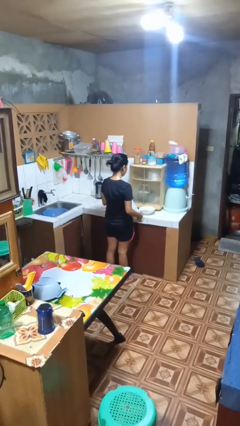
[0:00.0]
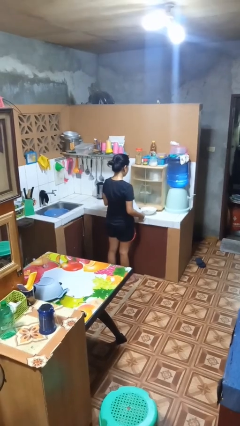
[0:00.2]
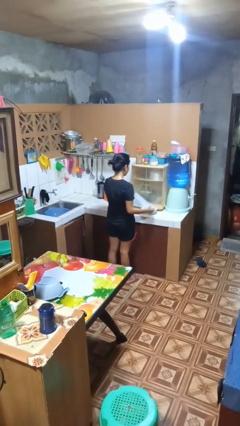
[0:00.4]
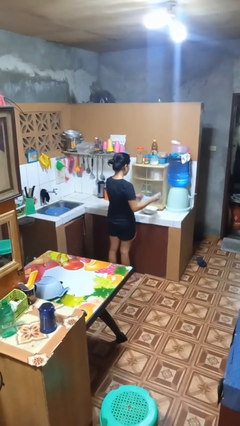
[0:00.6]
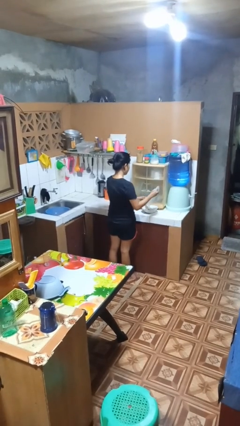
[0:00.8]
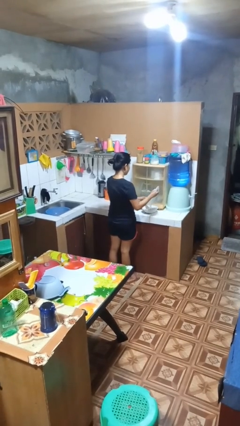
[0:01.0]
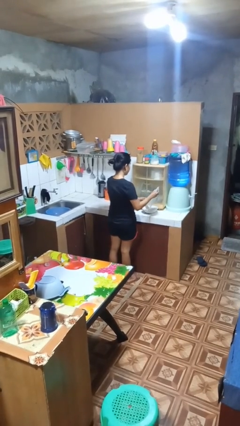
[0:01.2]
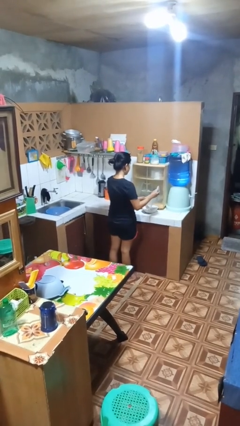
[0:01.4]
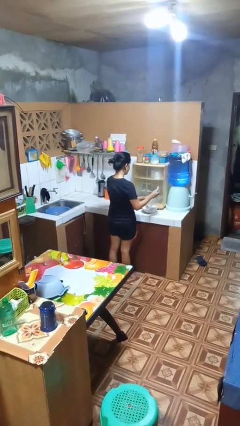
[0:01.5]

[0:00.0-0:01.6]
person pours into bowl

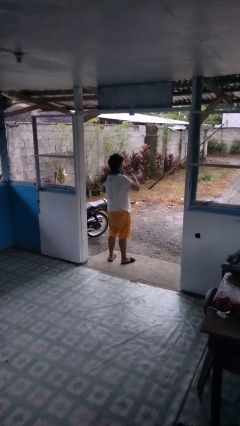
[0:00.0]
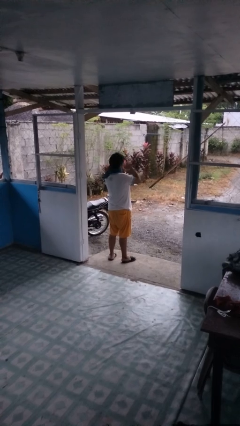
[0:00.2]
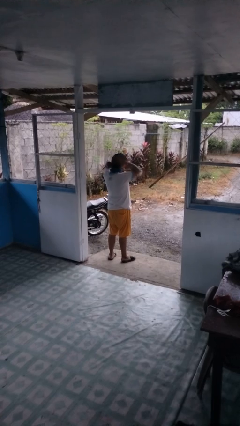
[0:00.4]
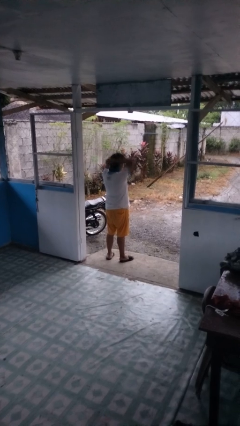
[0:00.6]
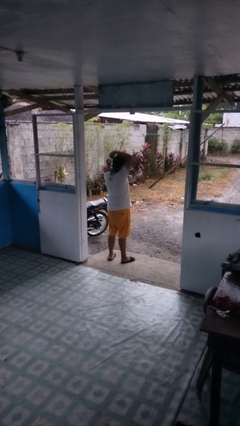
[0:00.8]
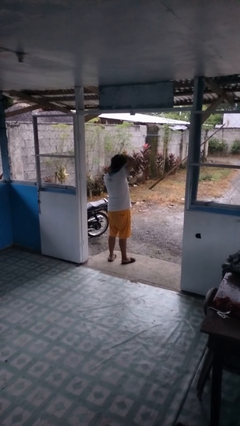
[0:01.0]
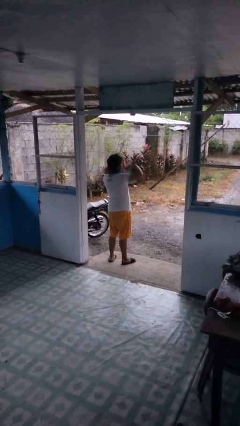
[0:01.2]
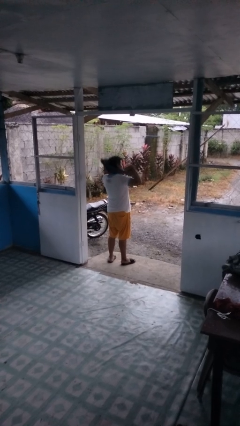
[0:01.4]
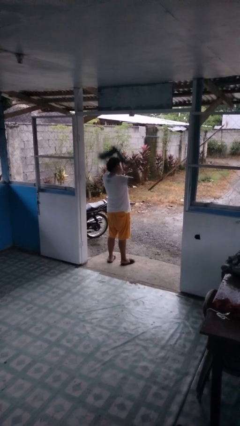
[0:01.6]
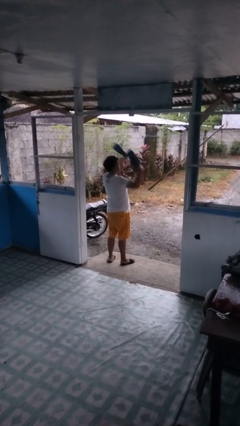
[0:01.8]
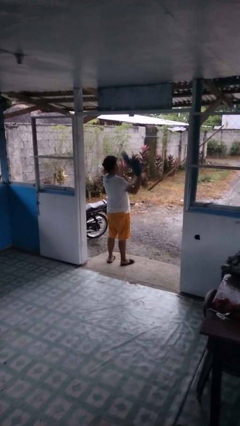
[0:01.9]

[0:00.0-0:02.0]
person takes off scarf

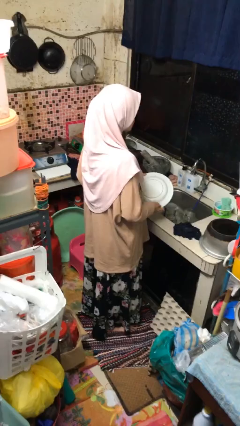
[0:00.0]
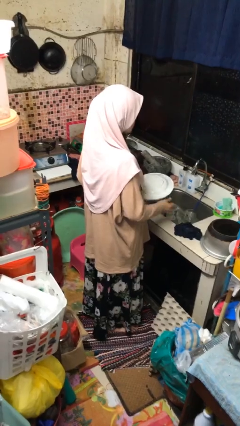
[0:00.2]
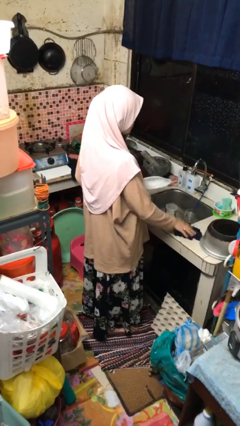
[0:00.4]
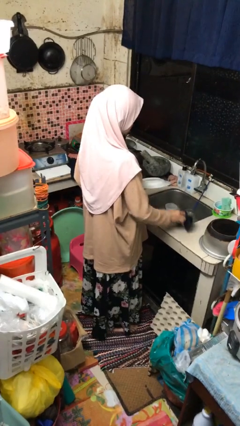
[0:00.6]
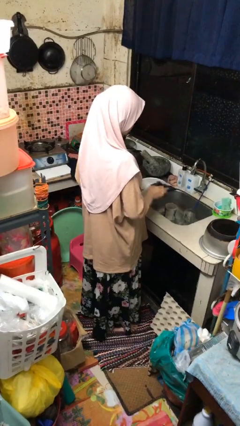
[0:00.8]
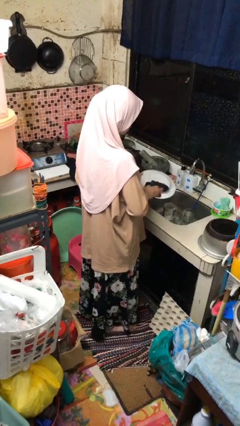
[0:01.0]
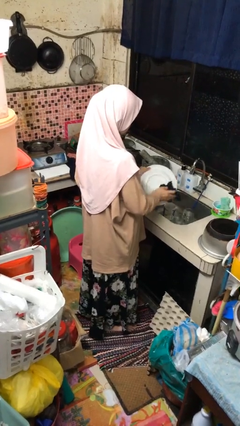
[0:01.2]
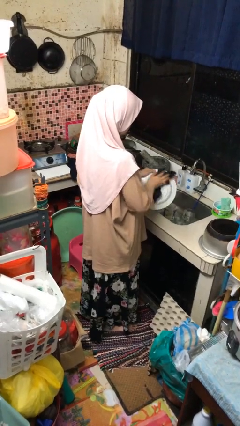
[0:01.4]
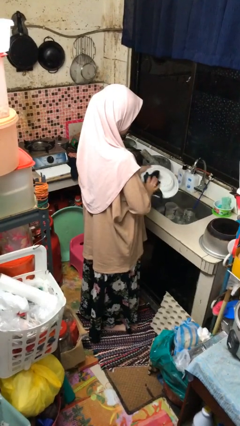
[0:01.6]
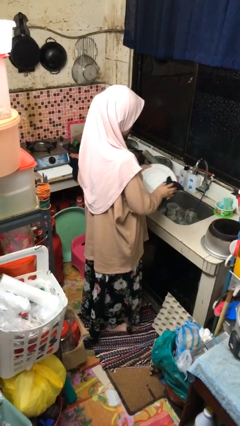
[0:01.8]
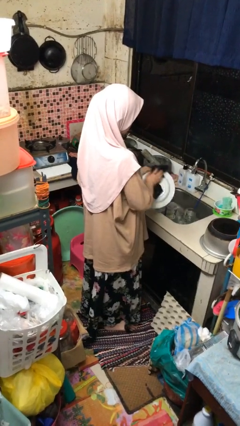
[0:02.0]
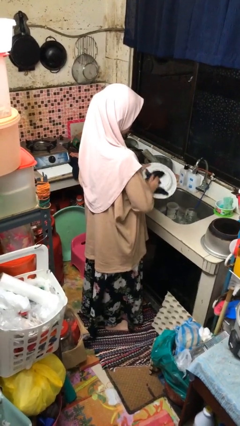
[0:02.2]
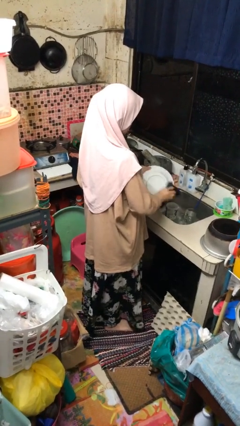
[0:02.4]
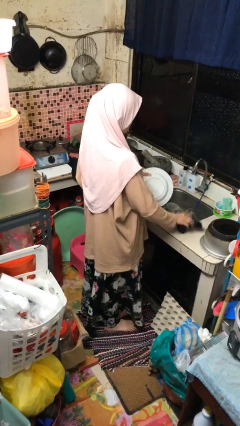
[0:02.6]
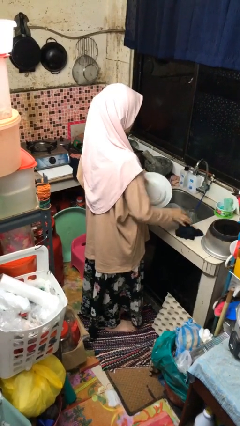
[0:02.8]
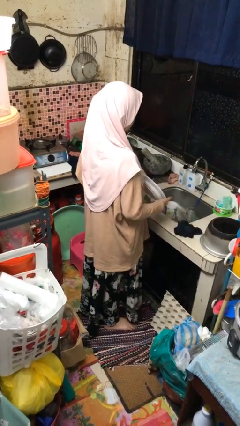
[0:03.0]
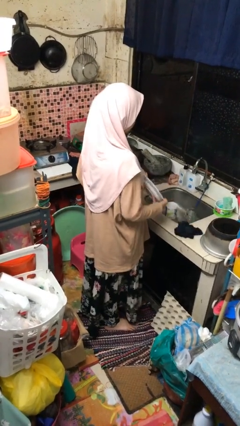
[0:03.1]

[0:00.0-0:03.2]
person dries dish

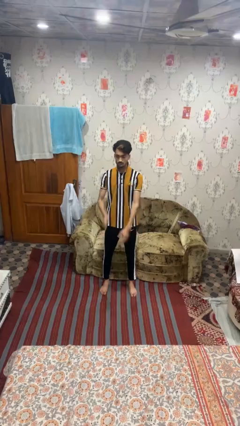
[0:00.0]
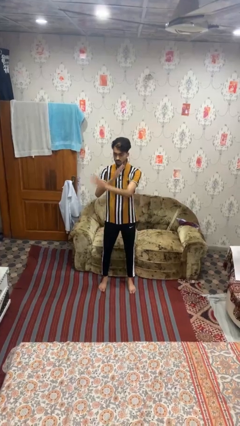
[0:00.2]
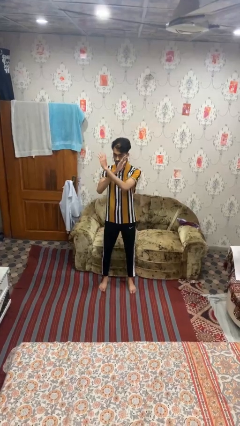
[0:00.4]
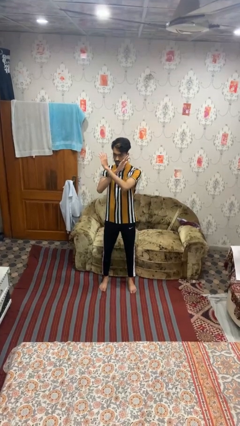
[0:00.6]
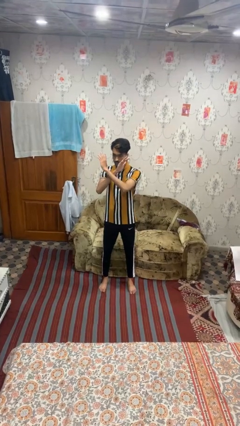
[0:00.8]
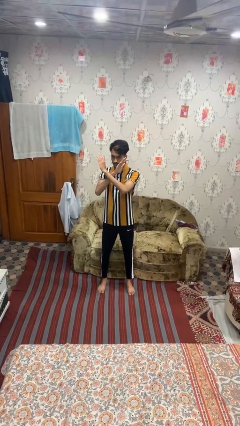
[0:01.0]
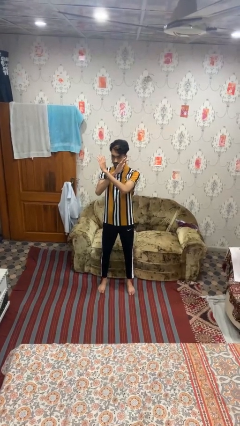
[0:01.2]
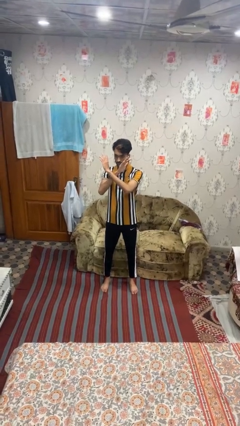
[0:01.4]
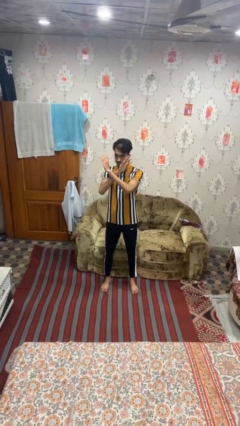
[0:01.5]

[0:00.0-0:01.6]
person gestures arms x

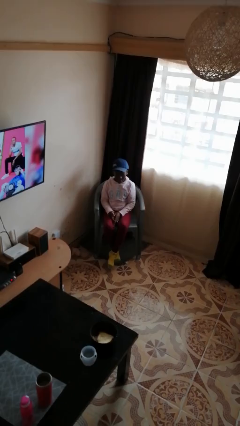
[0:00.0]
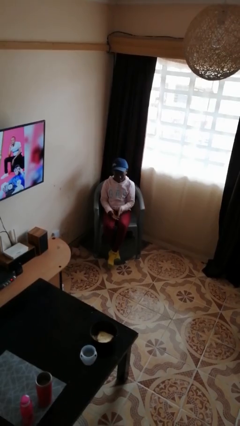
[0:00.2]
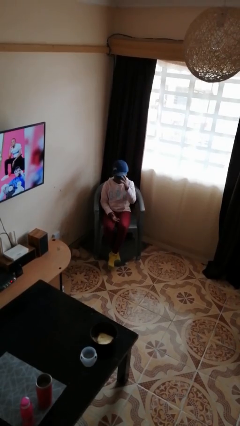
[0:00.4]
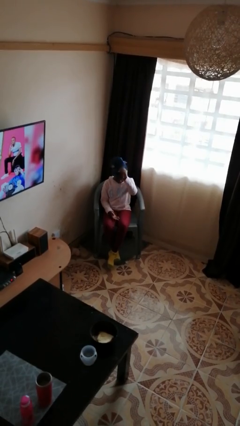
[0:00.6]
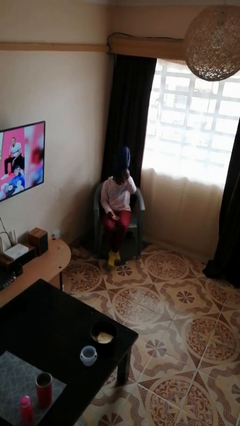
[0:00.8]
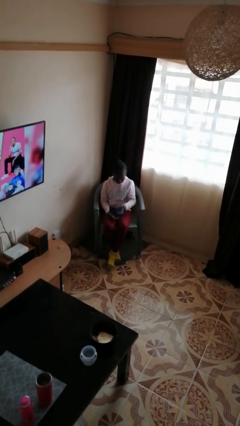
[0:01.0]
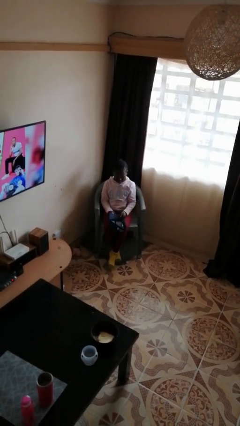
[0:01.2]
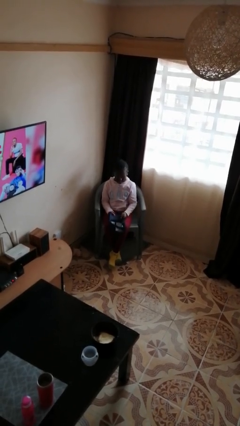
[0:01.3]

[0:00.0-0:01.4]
person takes off hat

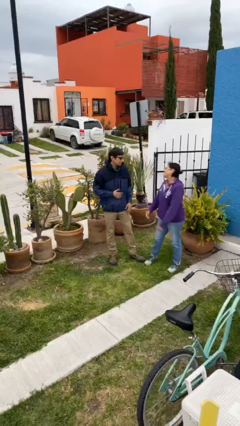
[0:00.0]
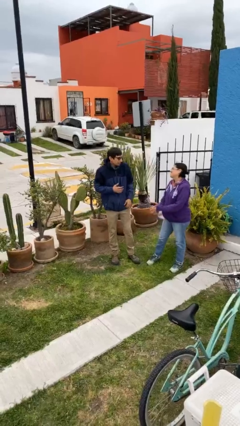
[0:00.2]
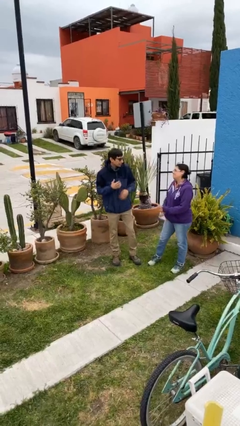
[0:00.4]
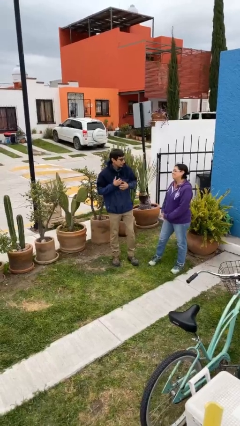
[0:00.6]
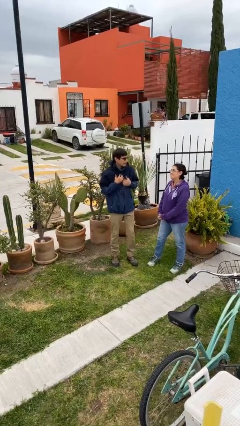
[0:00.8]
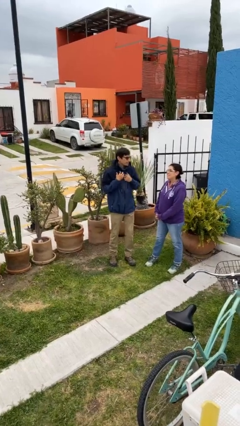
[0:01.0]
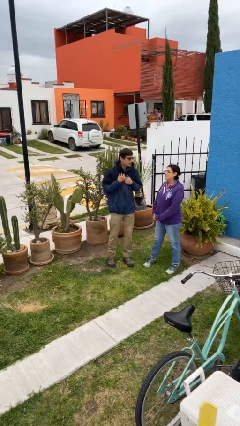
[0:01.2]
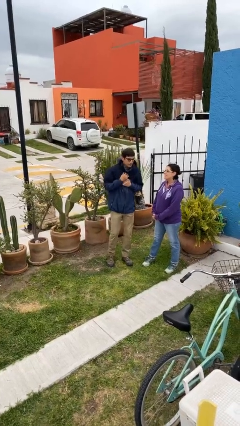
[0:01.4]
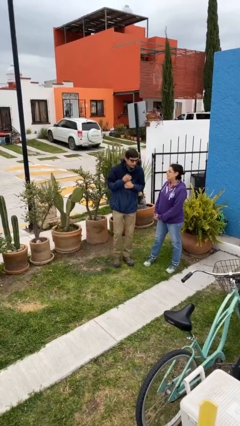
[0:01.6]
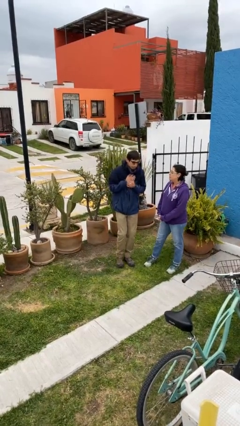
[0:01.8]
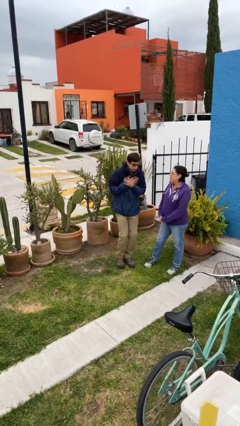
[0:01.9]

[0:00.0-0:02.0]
person talks to person

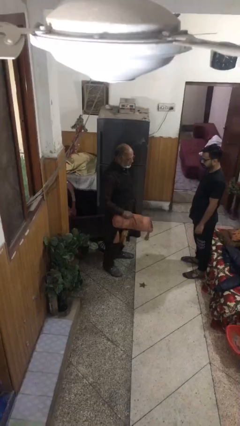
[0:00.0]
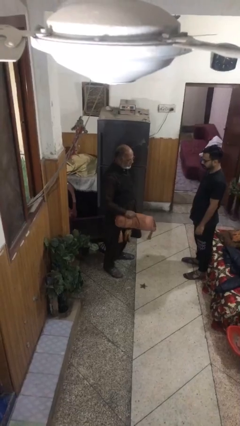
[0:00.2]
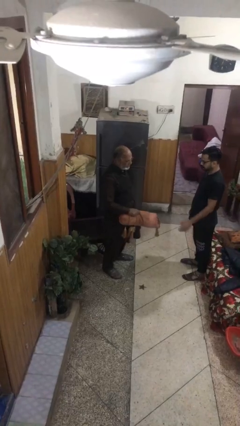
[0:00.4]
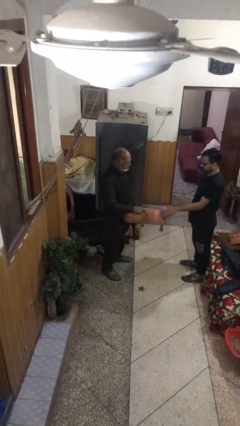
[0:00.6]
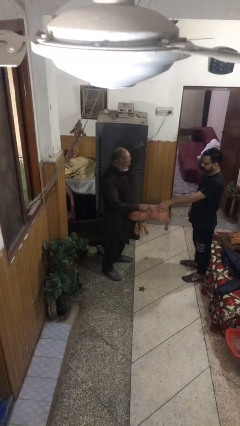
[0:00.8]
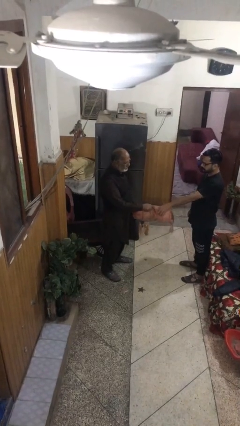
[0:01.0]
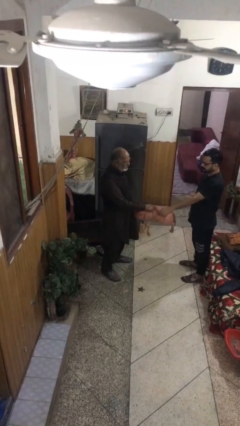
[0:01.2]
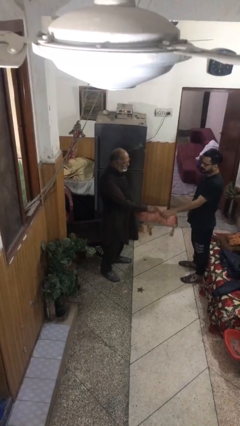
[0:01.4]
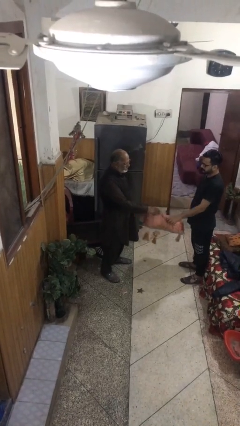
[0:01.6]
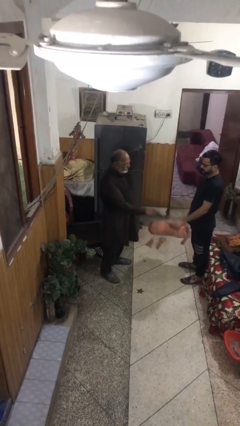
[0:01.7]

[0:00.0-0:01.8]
person transfers object to person

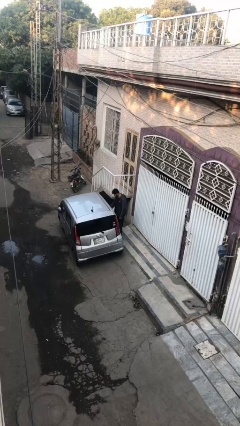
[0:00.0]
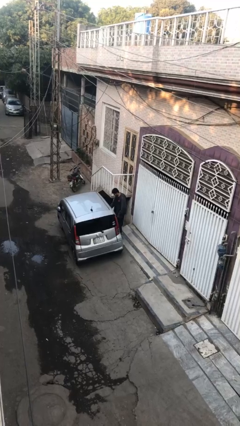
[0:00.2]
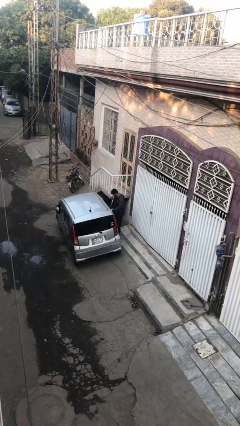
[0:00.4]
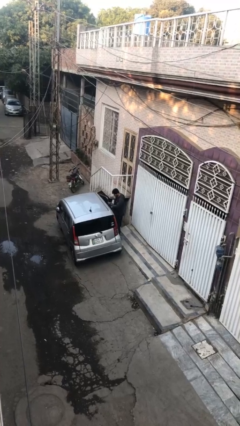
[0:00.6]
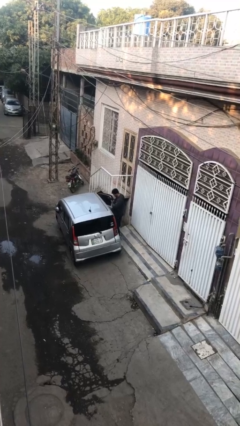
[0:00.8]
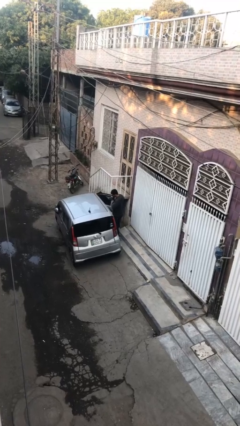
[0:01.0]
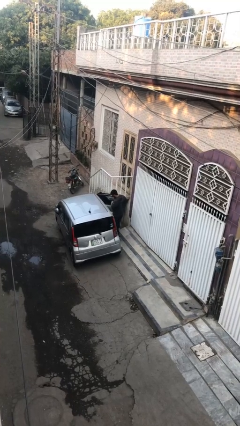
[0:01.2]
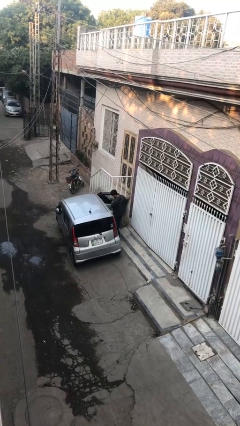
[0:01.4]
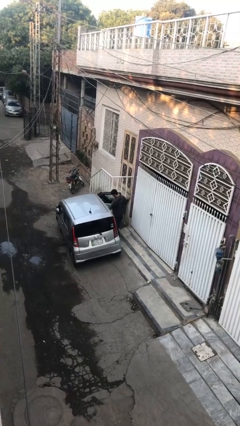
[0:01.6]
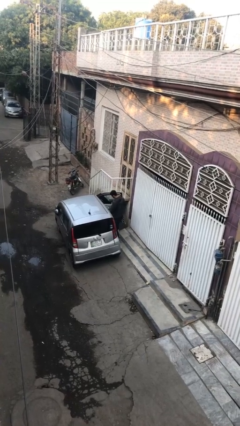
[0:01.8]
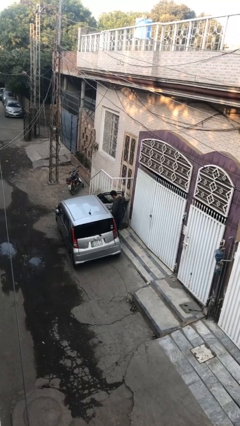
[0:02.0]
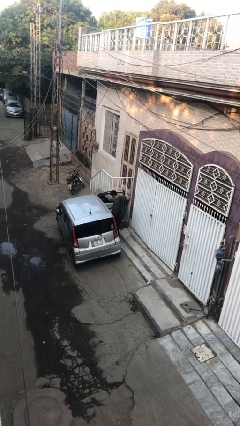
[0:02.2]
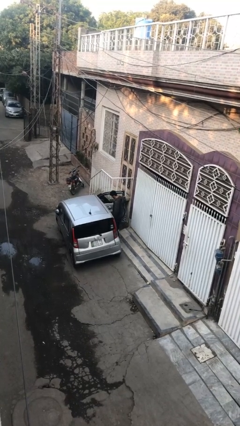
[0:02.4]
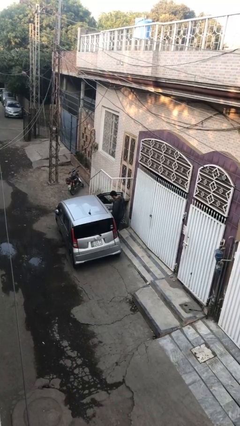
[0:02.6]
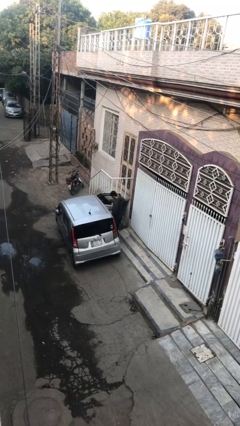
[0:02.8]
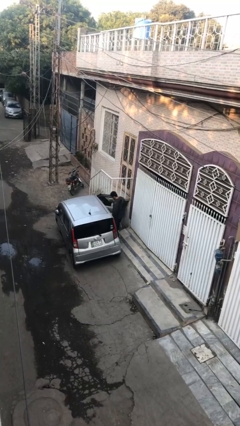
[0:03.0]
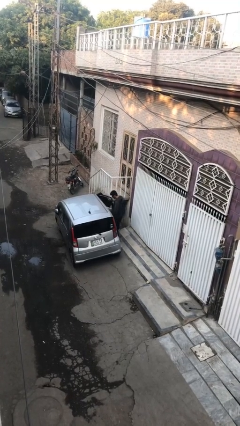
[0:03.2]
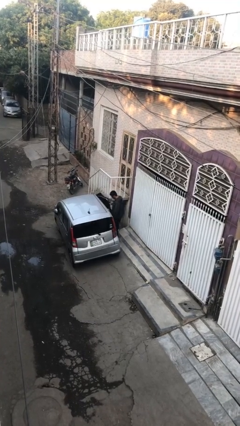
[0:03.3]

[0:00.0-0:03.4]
person opens car door
